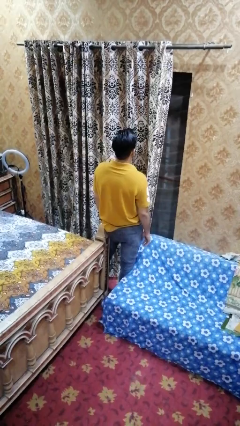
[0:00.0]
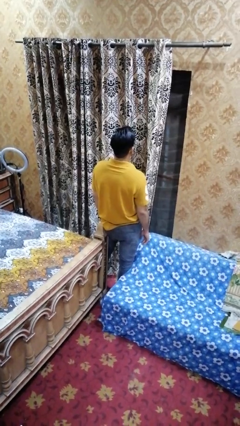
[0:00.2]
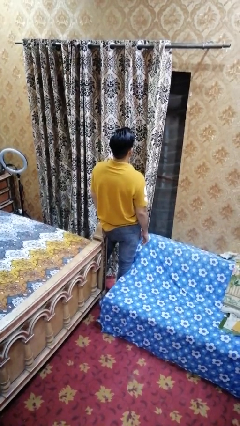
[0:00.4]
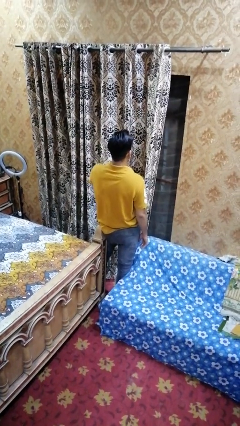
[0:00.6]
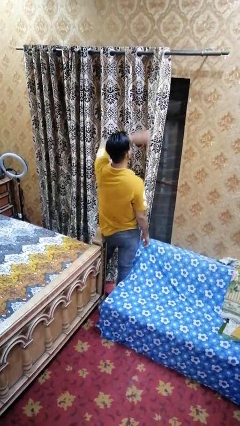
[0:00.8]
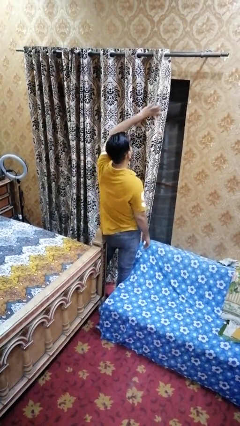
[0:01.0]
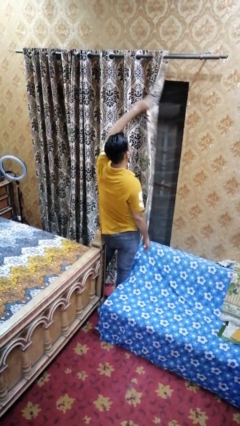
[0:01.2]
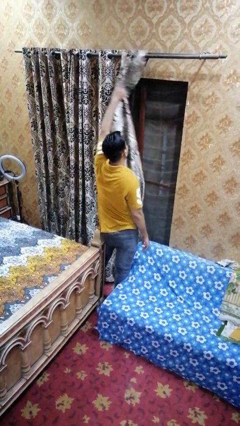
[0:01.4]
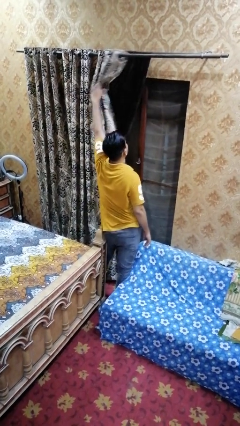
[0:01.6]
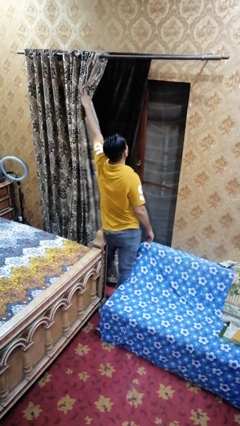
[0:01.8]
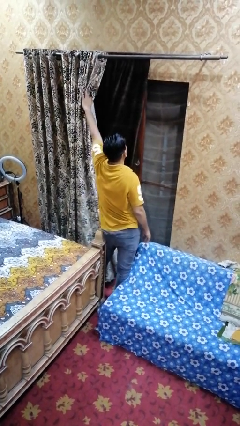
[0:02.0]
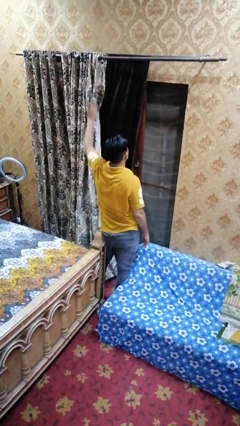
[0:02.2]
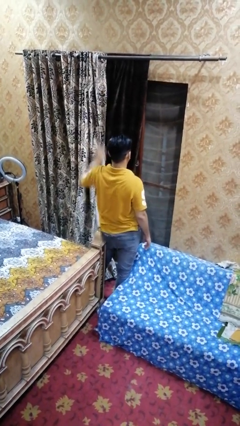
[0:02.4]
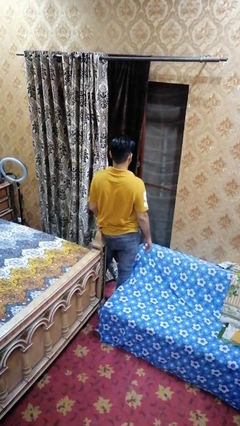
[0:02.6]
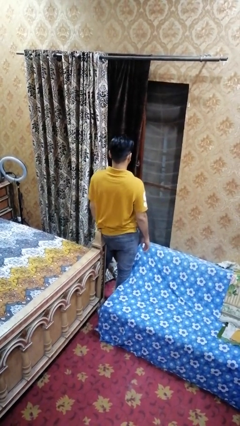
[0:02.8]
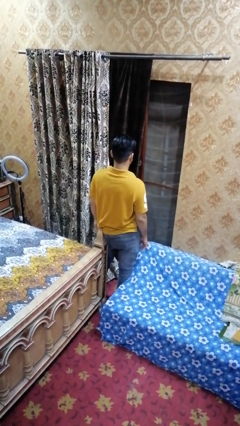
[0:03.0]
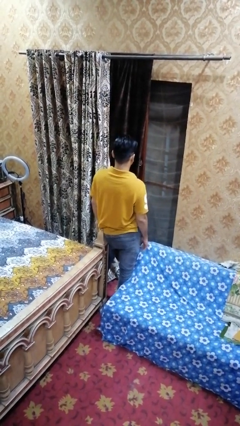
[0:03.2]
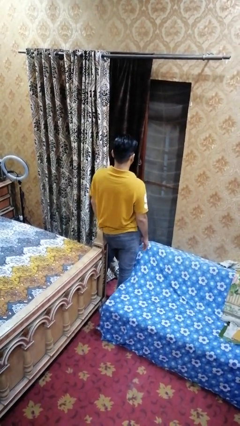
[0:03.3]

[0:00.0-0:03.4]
person opens curtains

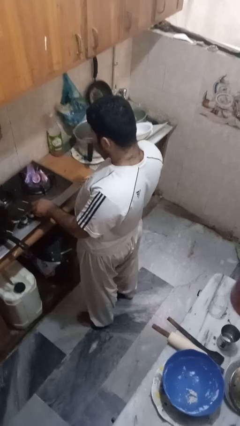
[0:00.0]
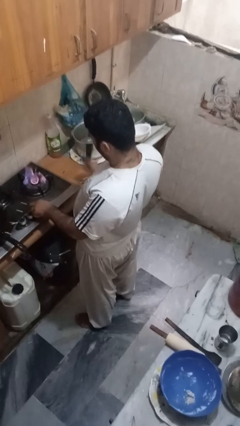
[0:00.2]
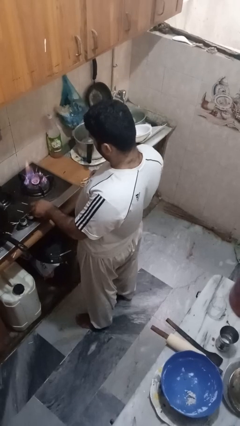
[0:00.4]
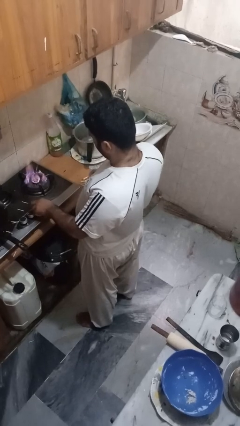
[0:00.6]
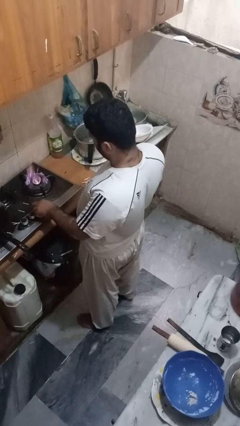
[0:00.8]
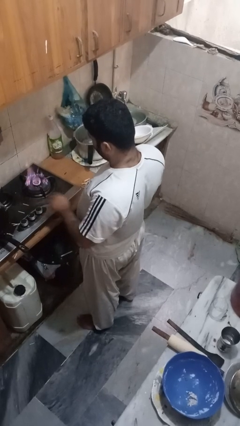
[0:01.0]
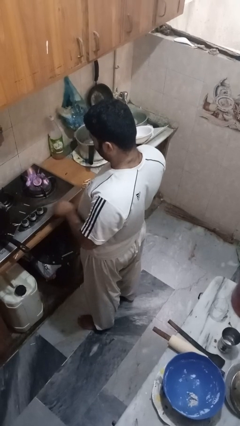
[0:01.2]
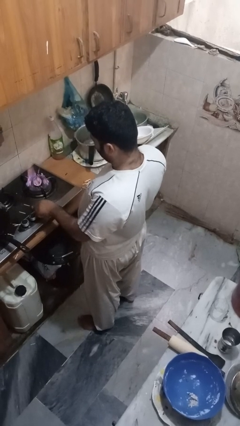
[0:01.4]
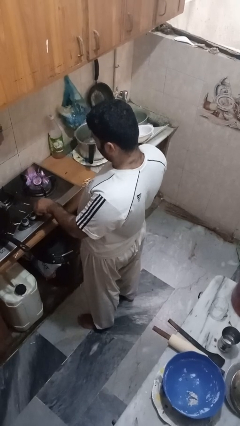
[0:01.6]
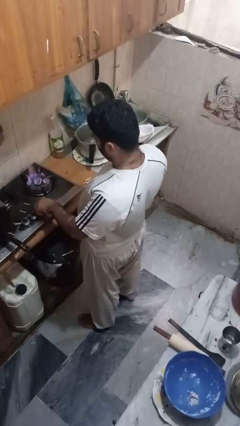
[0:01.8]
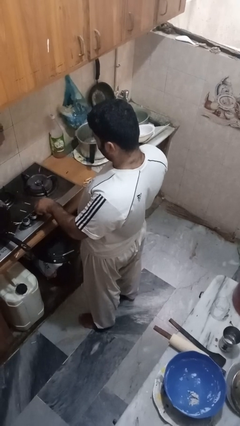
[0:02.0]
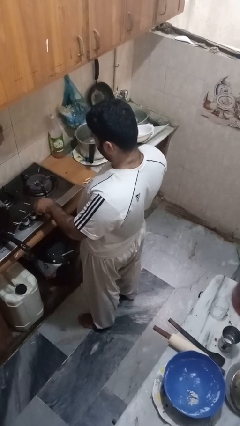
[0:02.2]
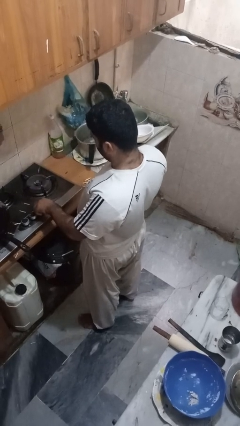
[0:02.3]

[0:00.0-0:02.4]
person turns off stovetop

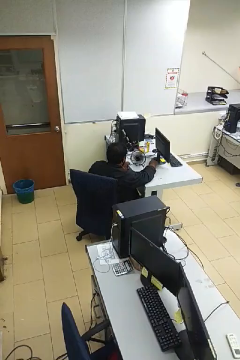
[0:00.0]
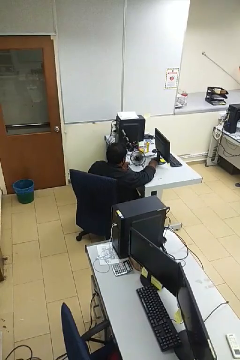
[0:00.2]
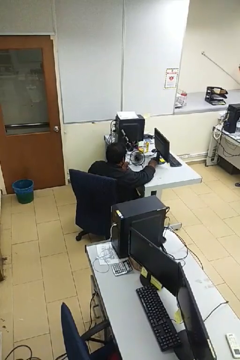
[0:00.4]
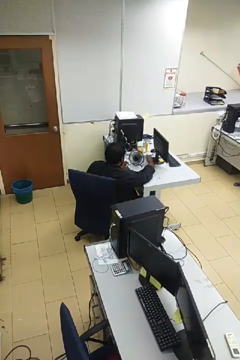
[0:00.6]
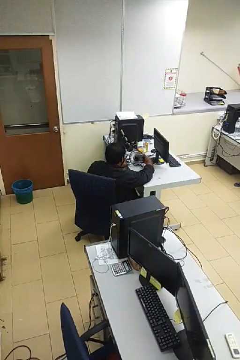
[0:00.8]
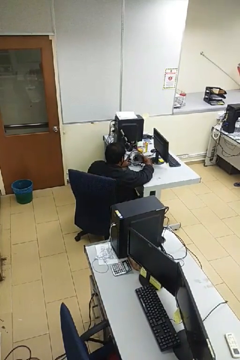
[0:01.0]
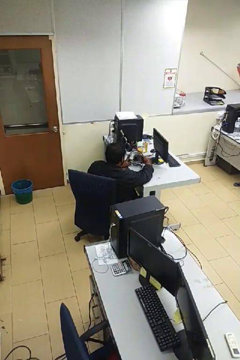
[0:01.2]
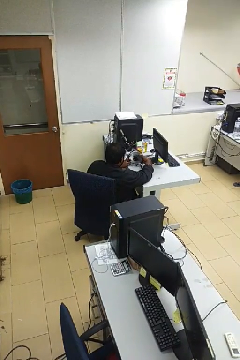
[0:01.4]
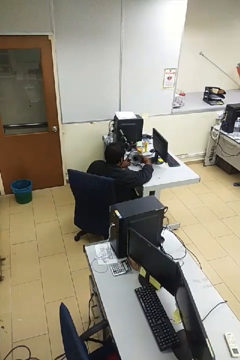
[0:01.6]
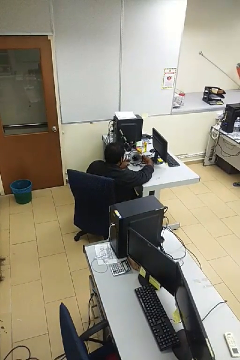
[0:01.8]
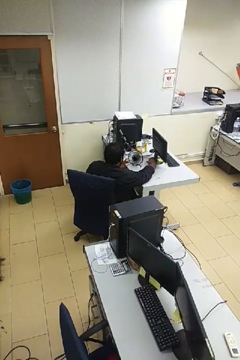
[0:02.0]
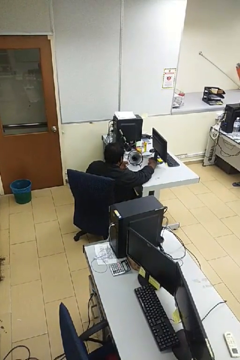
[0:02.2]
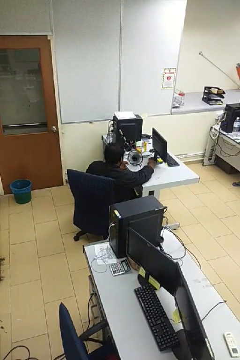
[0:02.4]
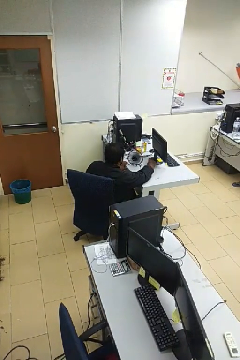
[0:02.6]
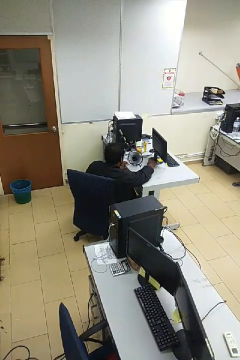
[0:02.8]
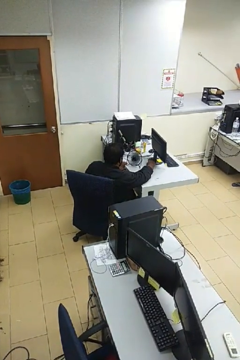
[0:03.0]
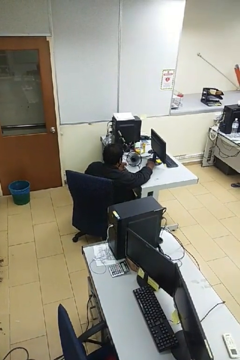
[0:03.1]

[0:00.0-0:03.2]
person turns on fan

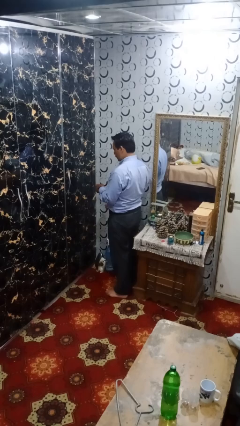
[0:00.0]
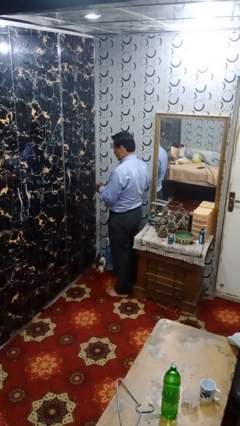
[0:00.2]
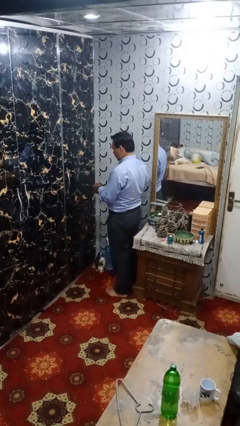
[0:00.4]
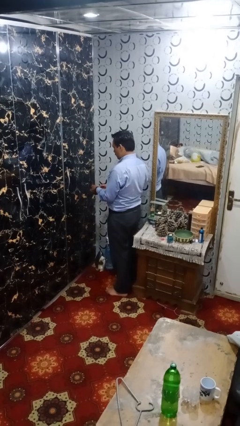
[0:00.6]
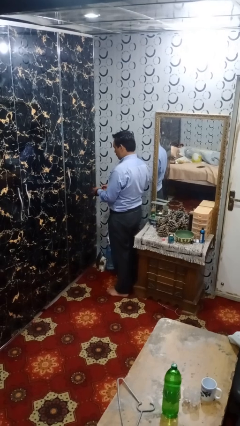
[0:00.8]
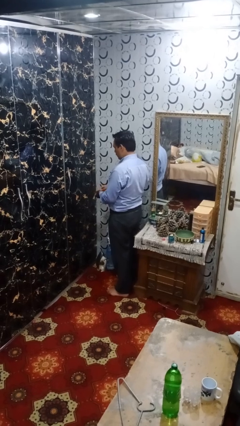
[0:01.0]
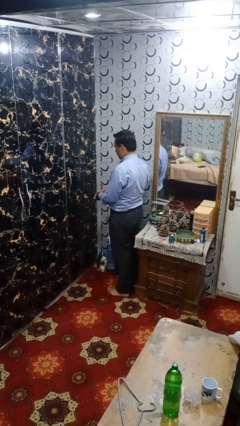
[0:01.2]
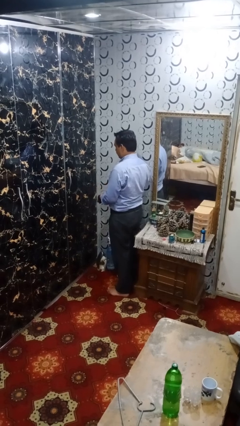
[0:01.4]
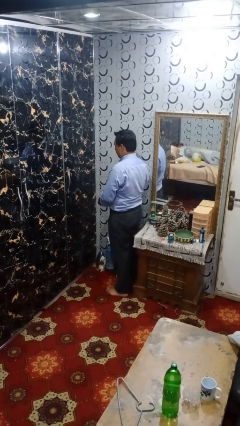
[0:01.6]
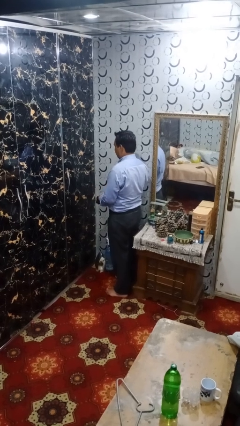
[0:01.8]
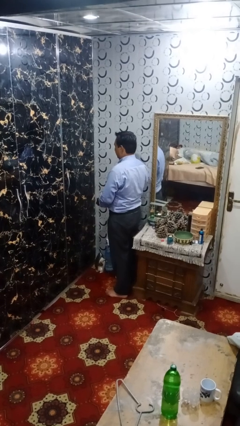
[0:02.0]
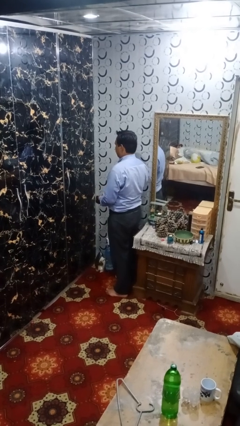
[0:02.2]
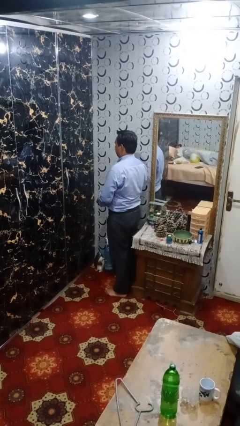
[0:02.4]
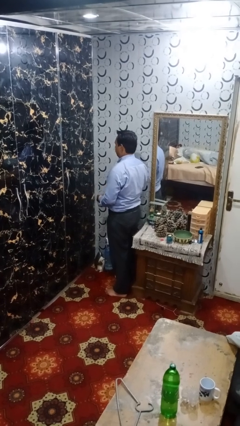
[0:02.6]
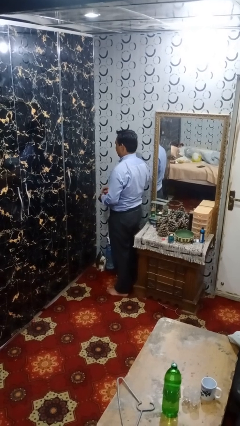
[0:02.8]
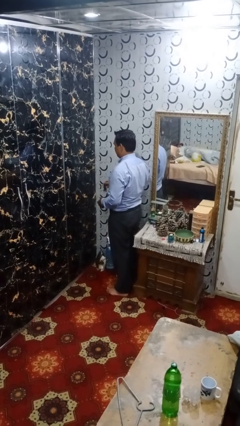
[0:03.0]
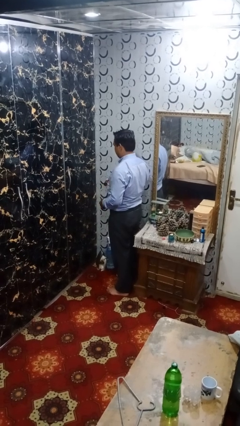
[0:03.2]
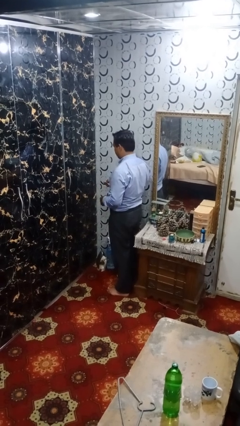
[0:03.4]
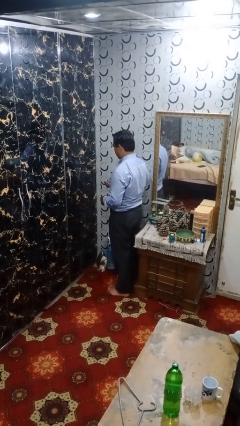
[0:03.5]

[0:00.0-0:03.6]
person takes off wristwatch

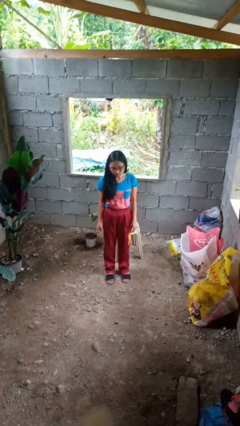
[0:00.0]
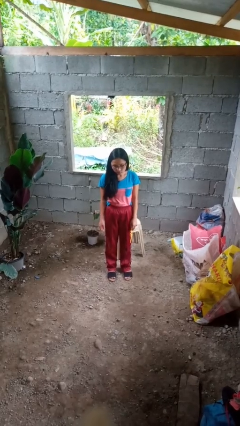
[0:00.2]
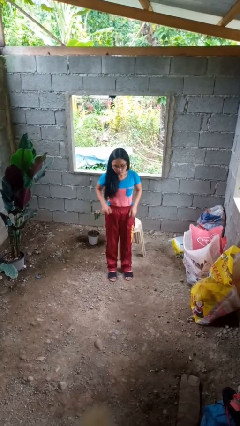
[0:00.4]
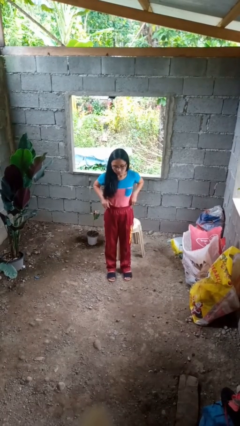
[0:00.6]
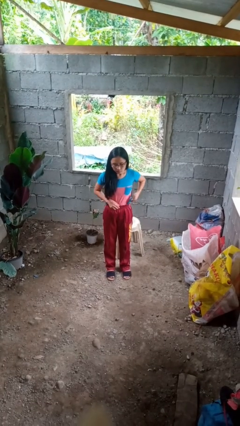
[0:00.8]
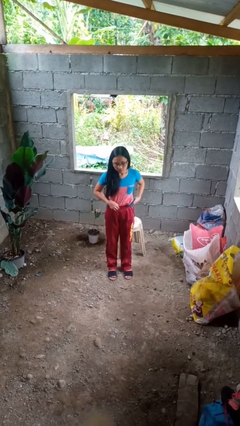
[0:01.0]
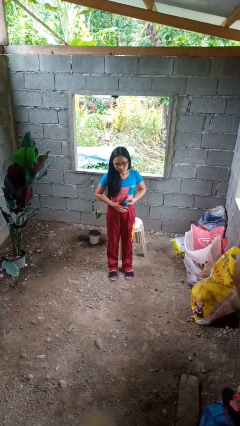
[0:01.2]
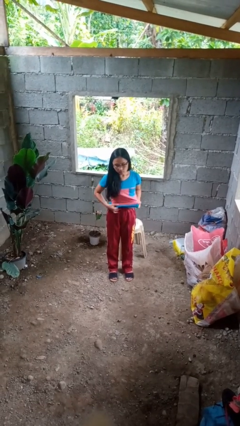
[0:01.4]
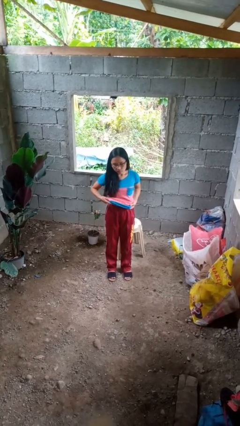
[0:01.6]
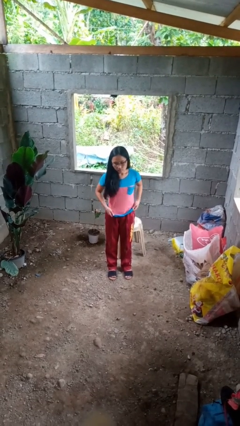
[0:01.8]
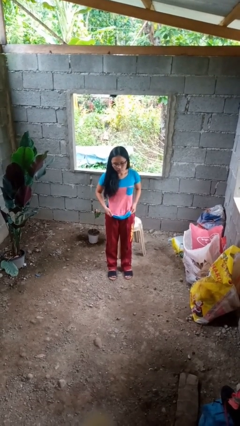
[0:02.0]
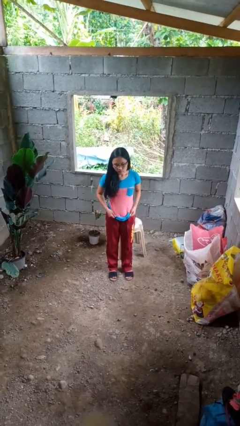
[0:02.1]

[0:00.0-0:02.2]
person untucks shirt

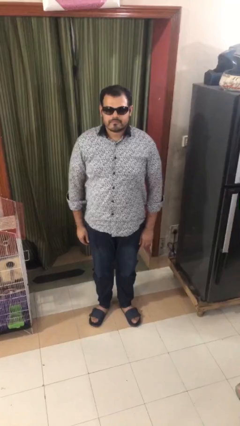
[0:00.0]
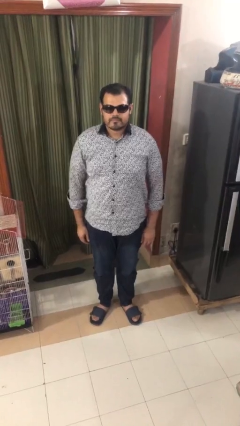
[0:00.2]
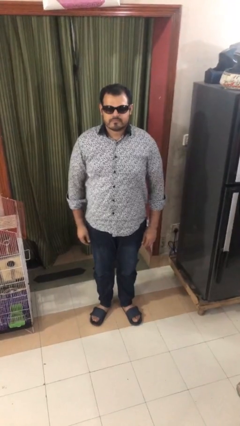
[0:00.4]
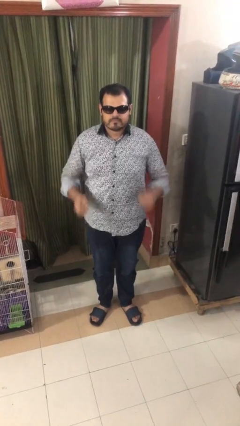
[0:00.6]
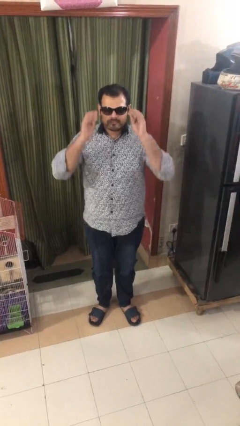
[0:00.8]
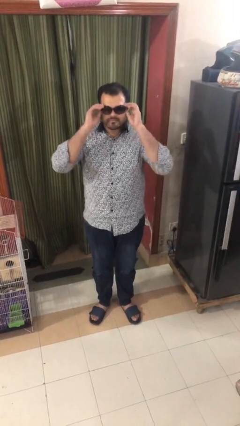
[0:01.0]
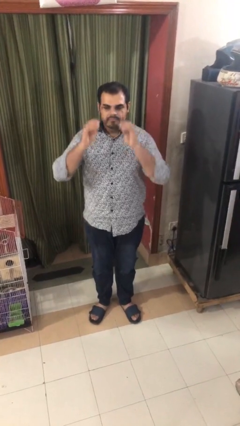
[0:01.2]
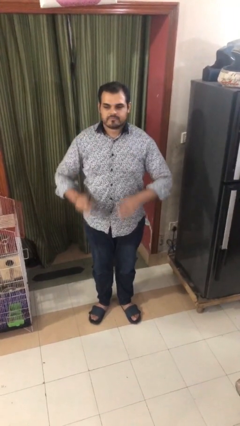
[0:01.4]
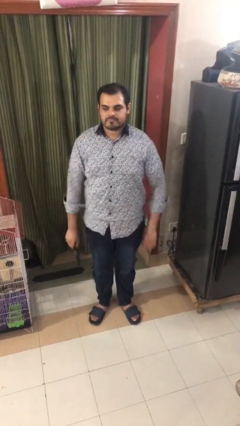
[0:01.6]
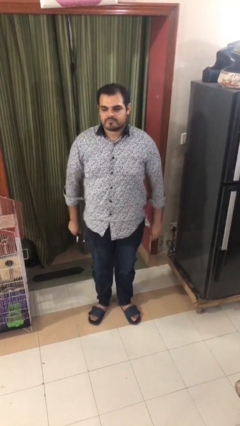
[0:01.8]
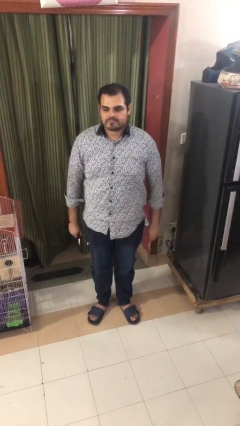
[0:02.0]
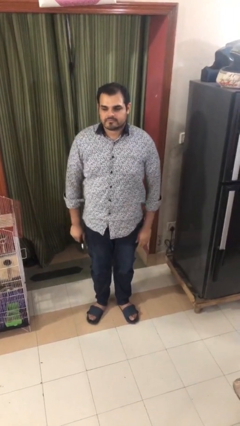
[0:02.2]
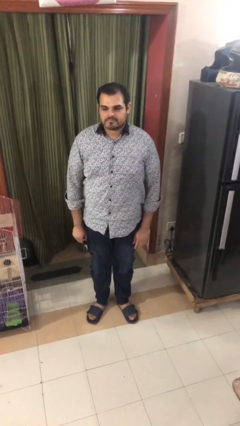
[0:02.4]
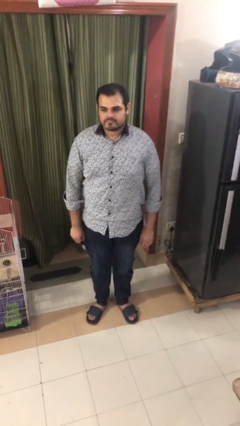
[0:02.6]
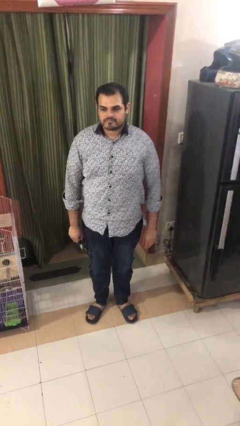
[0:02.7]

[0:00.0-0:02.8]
person takes off sunglasses

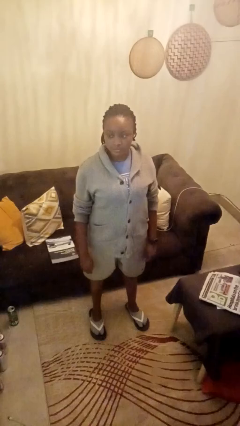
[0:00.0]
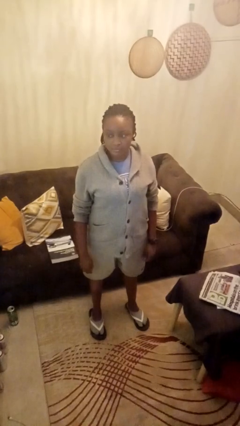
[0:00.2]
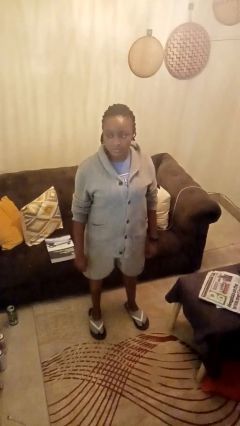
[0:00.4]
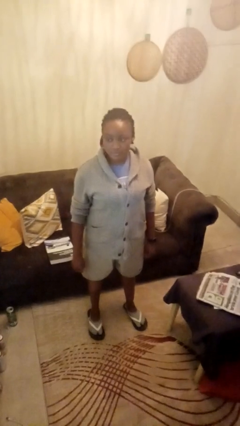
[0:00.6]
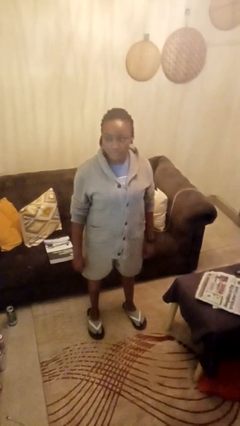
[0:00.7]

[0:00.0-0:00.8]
person stands up
